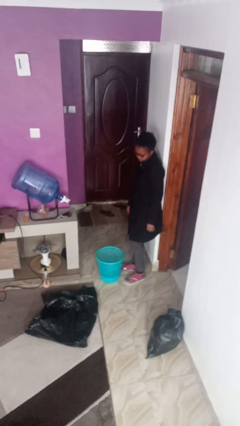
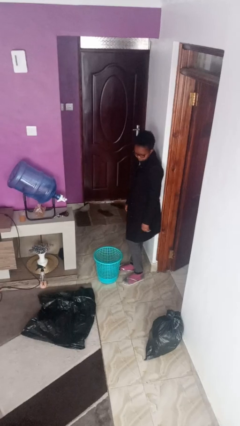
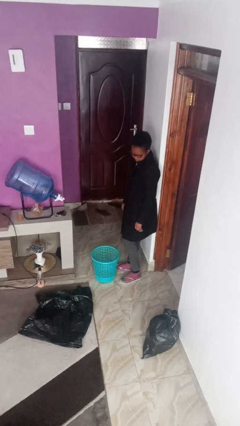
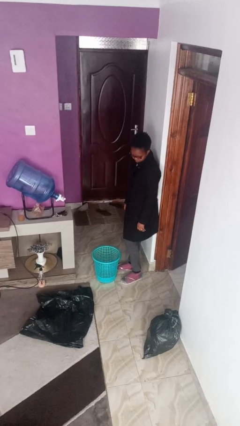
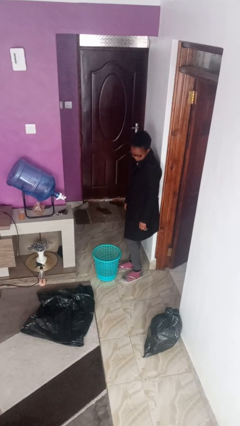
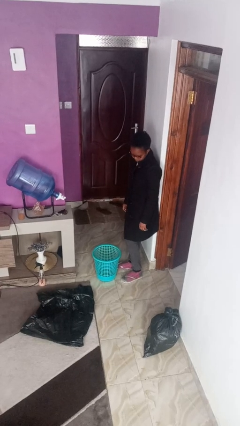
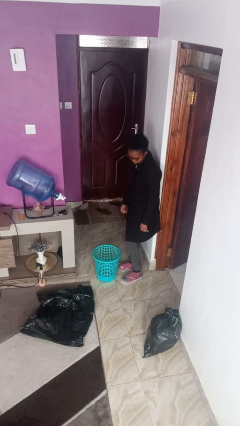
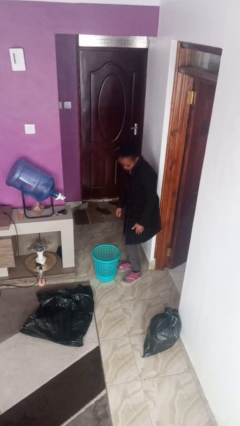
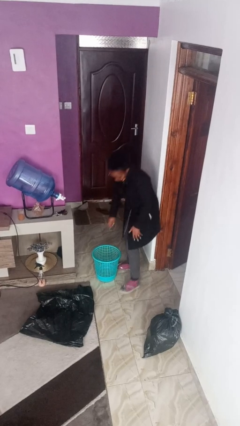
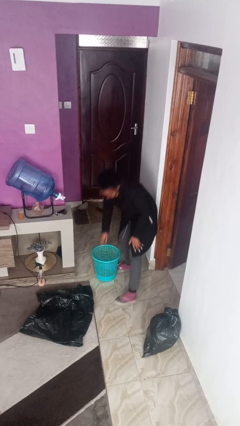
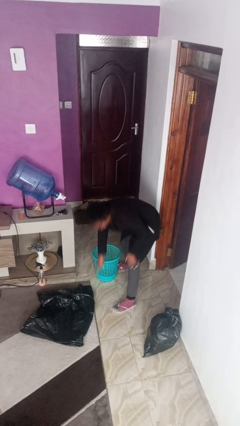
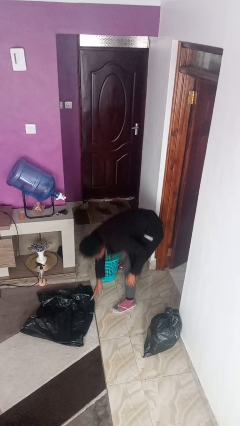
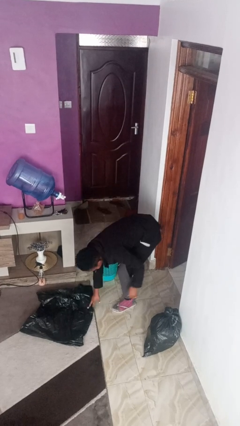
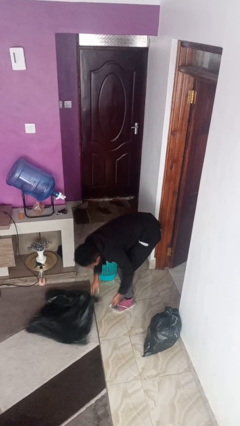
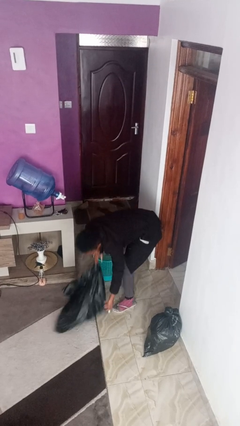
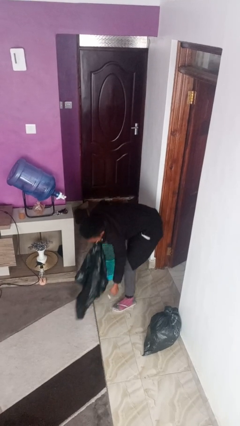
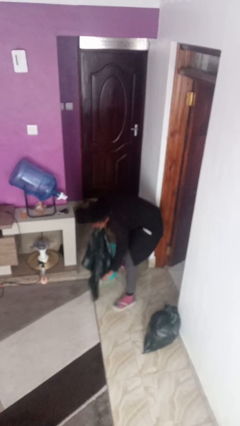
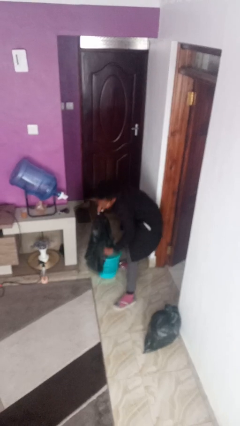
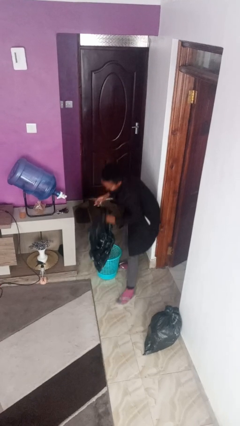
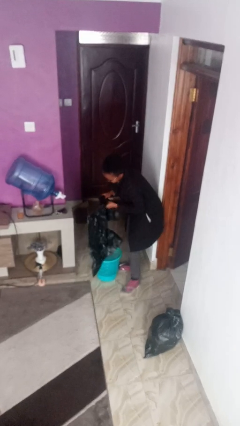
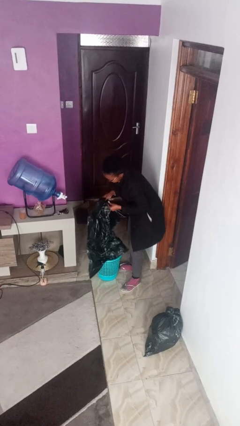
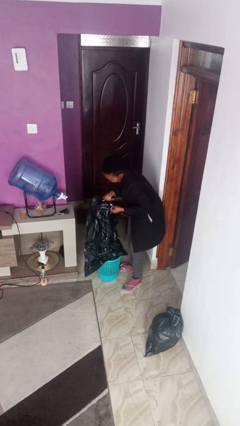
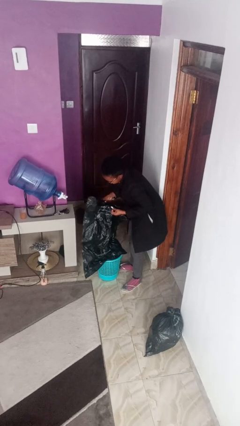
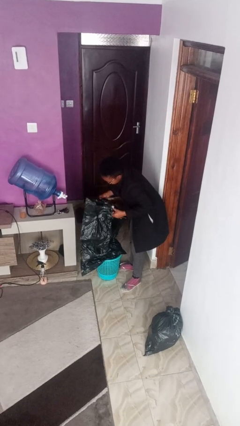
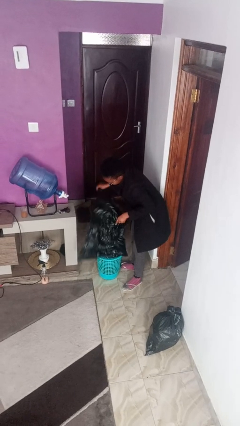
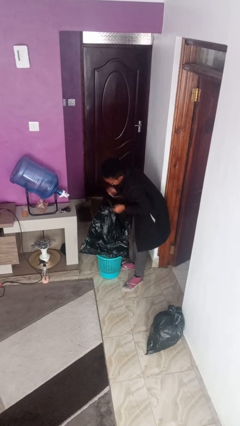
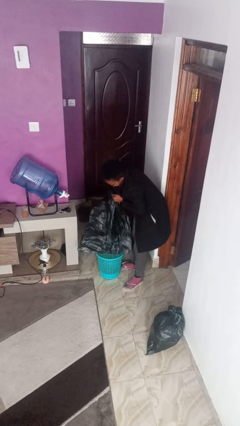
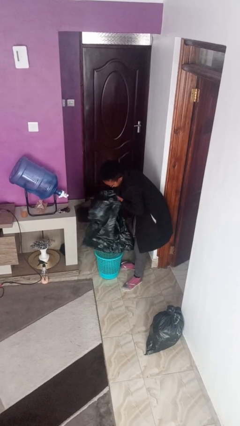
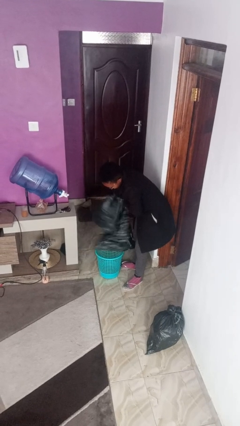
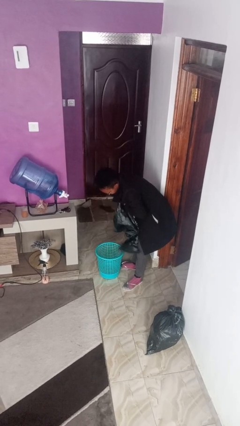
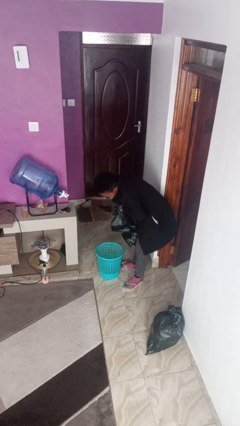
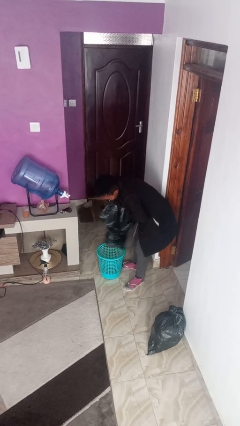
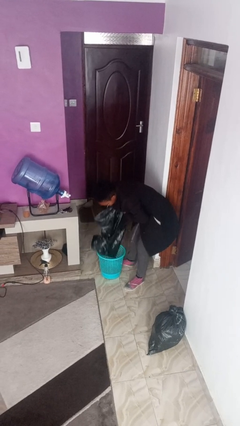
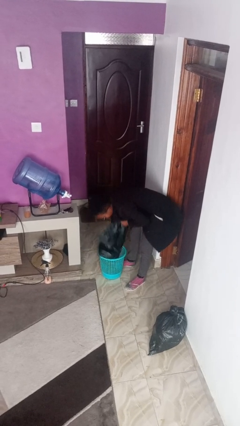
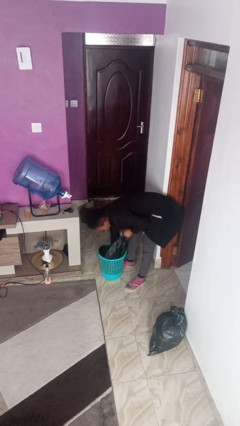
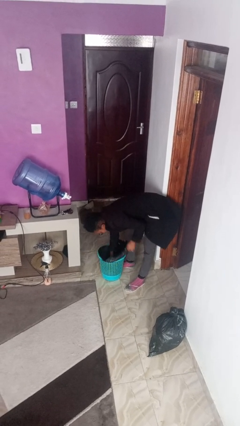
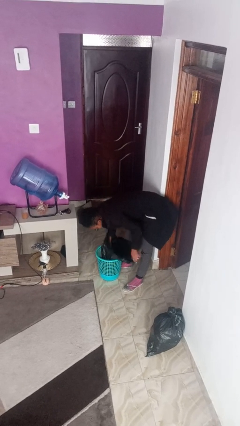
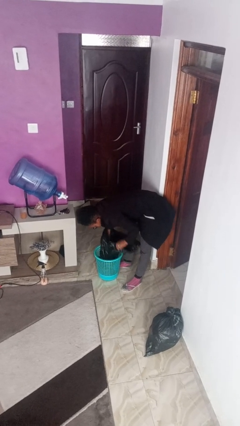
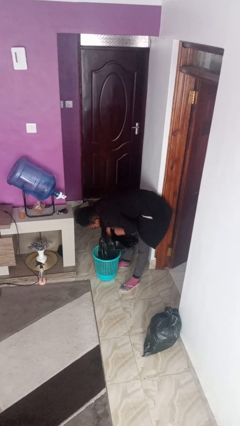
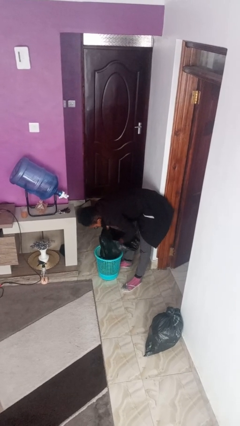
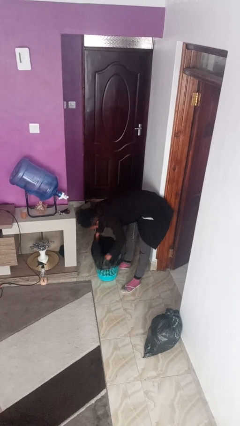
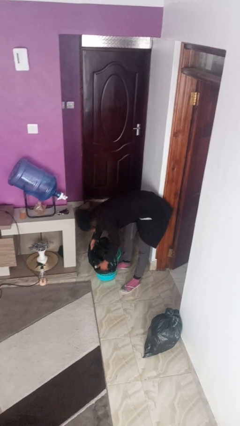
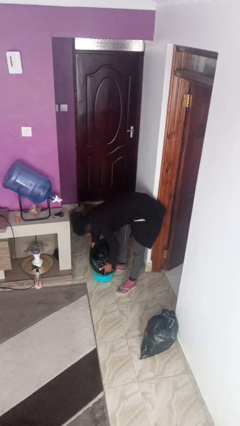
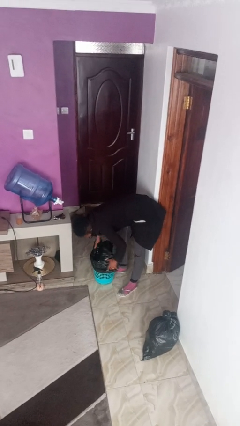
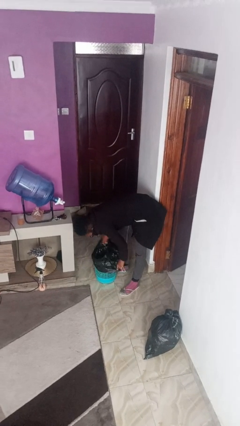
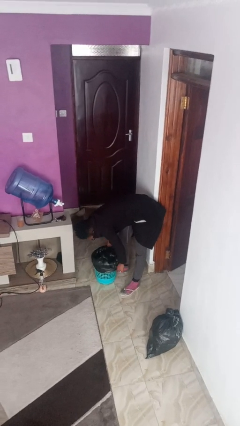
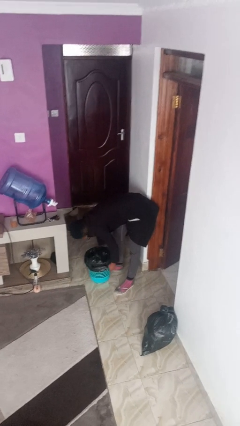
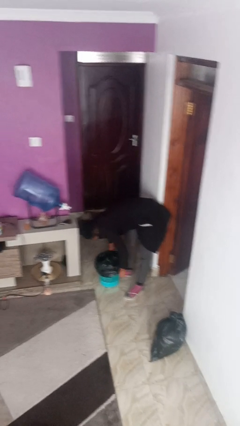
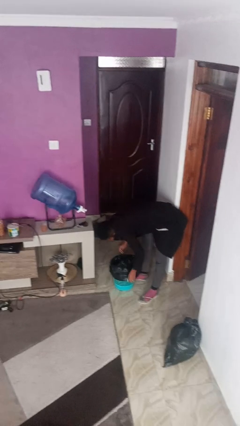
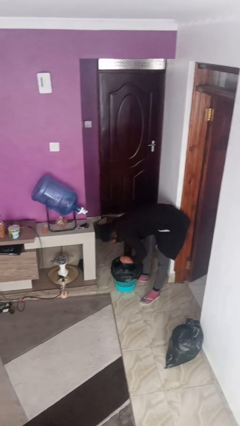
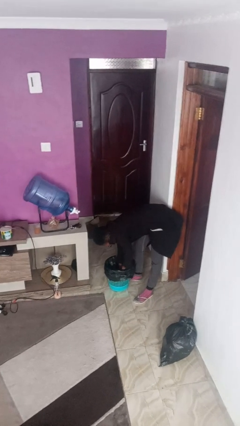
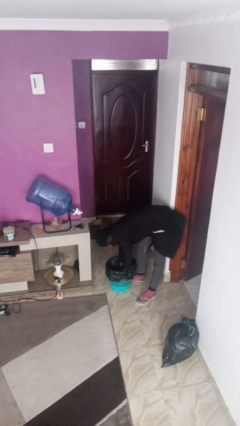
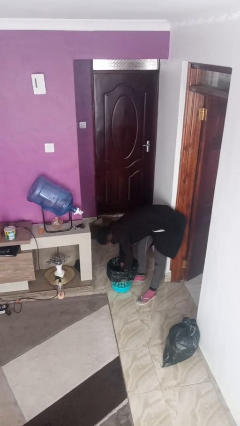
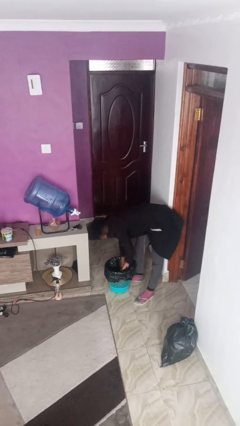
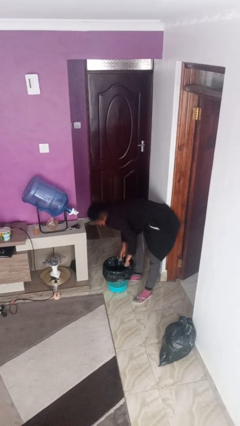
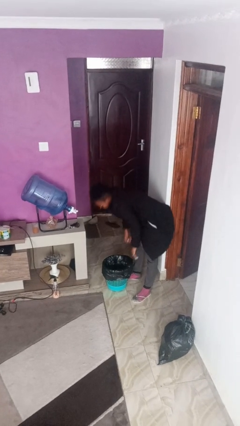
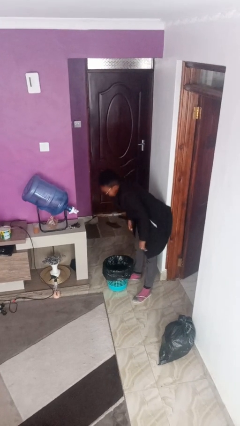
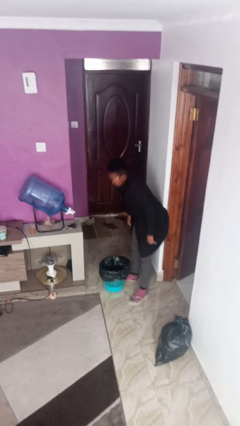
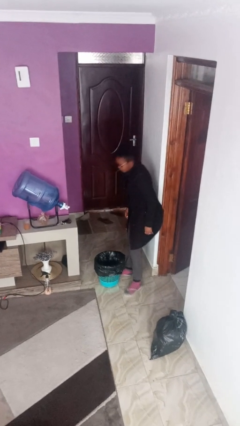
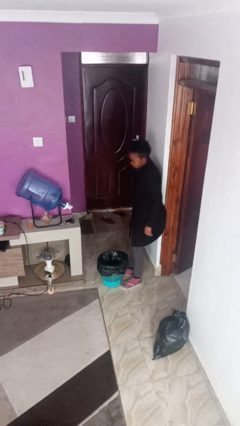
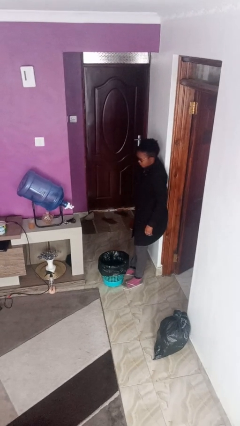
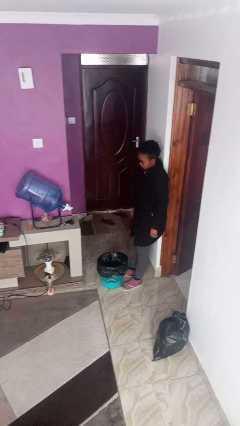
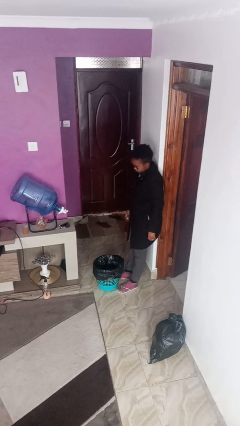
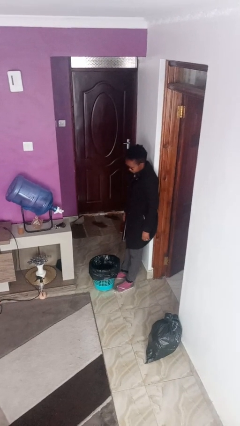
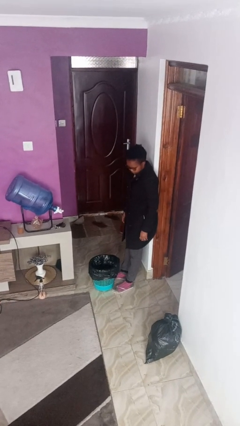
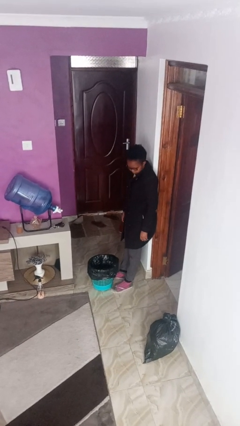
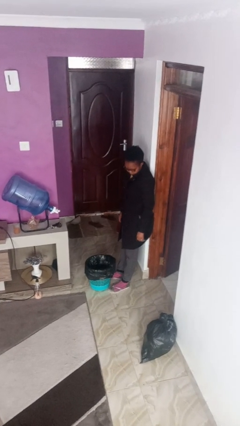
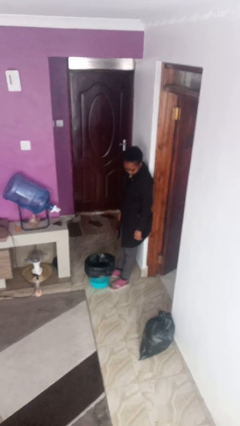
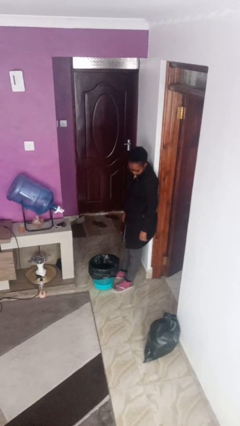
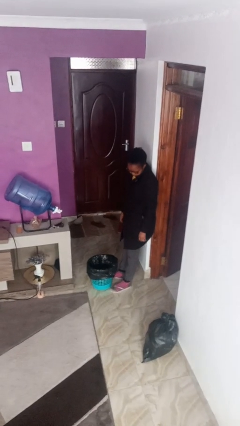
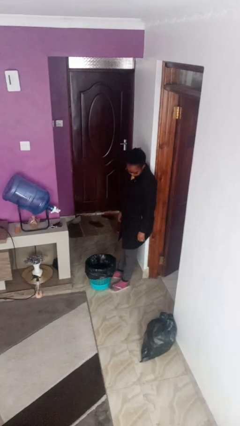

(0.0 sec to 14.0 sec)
person inserts trashbag into trashcan

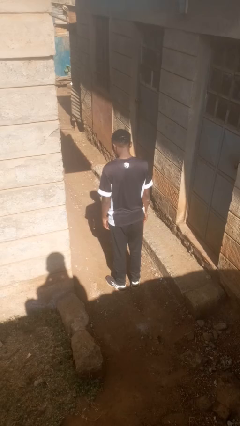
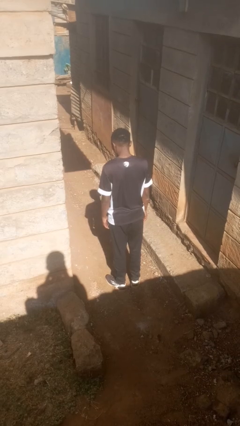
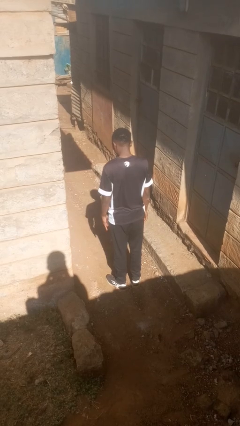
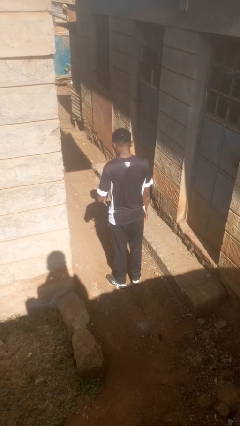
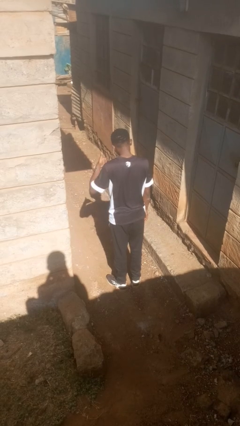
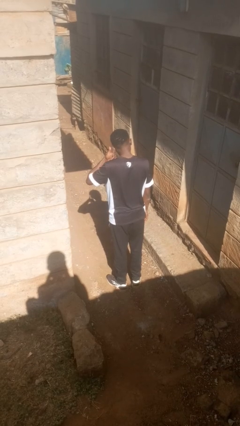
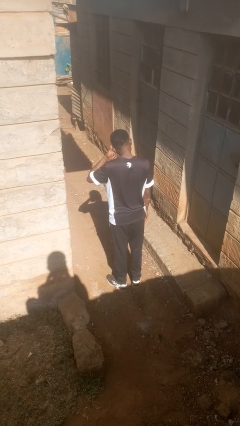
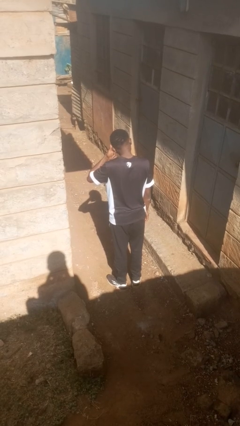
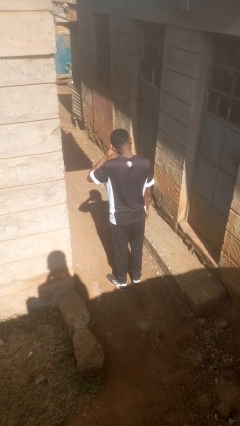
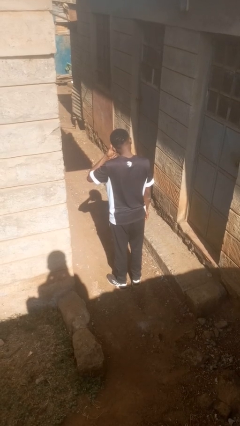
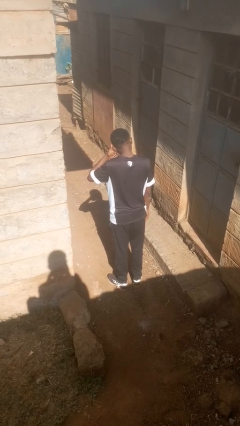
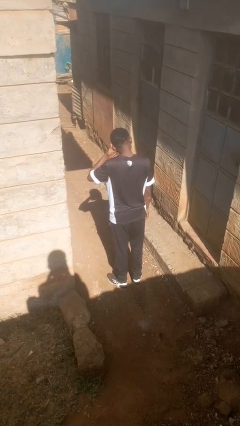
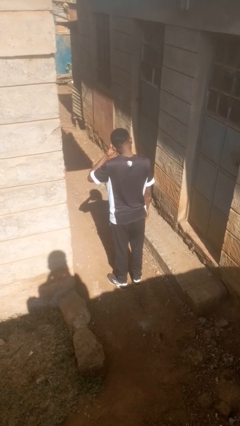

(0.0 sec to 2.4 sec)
person gestures call me

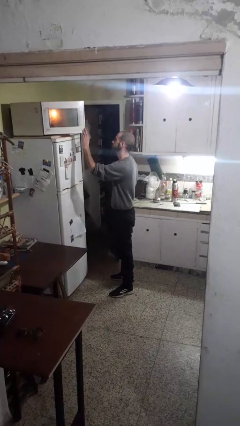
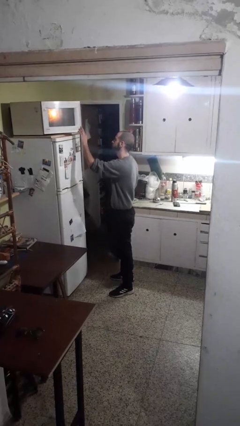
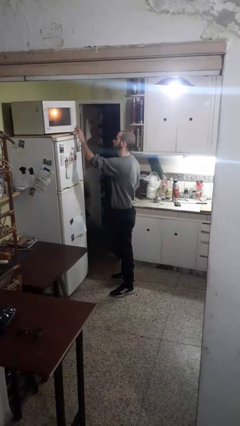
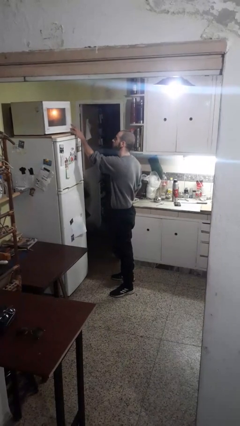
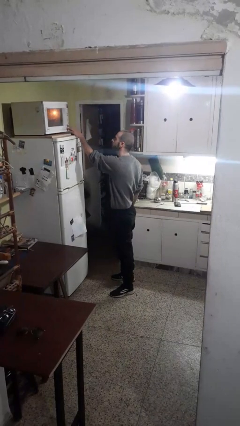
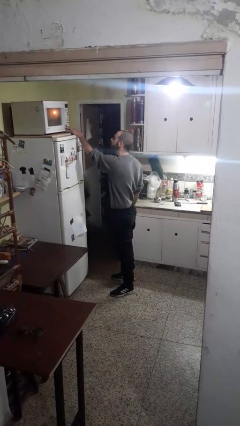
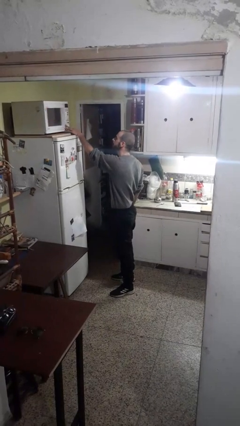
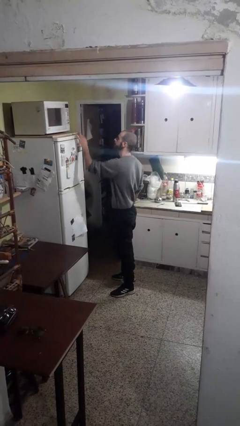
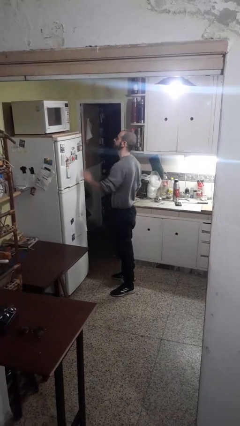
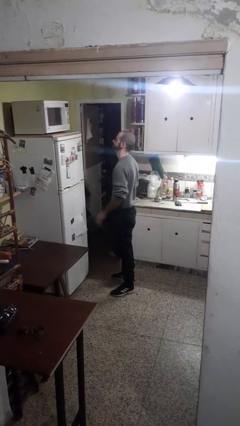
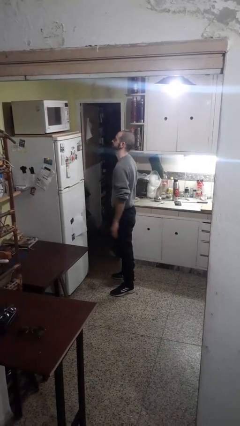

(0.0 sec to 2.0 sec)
person closes microwave
